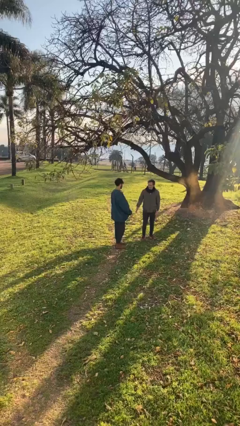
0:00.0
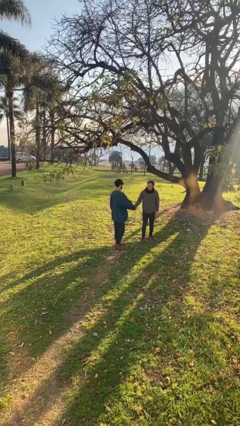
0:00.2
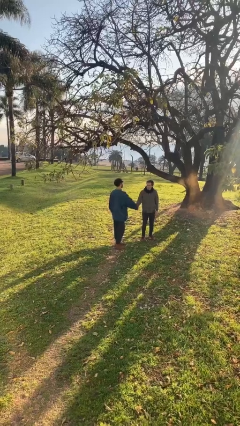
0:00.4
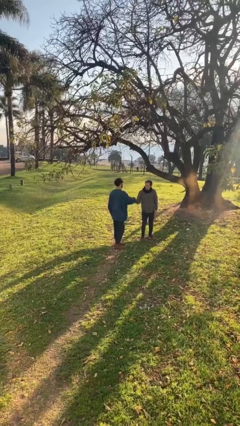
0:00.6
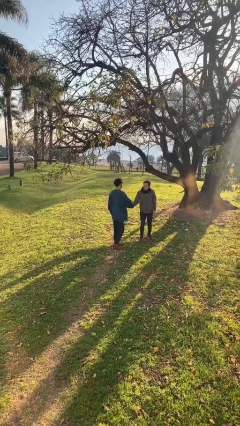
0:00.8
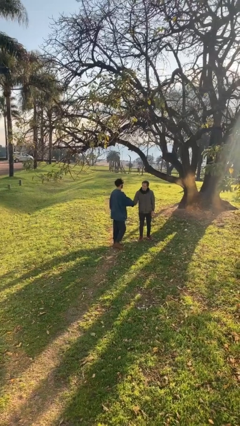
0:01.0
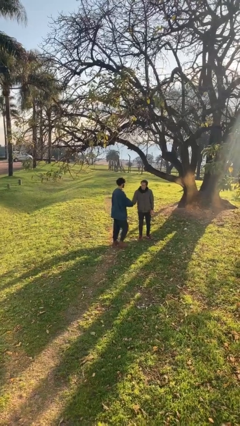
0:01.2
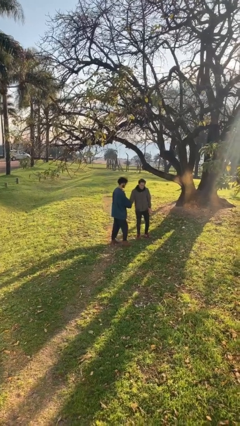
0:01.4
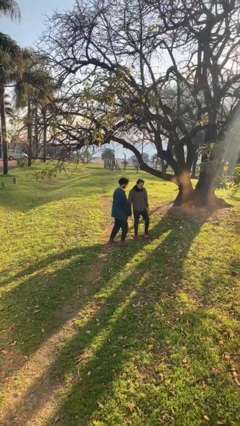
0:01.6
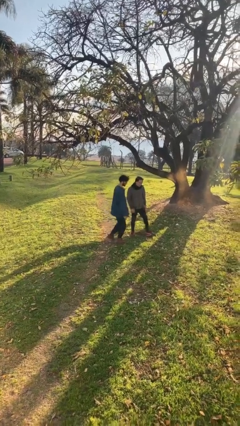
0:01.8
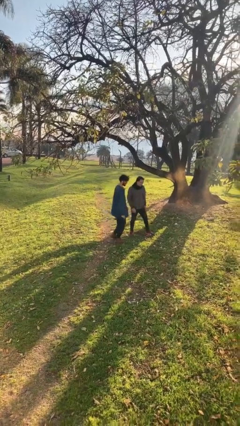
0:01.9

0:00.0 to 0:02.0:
person shakes hand

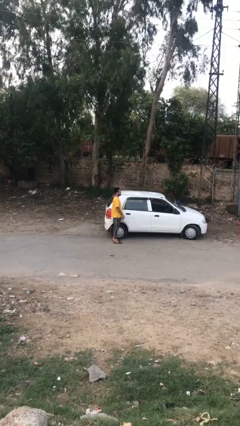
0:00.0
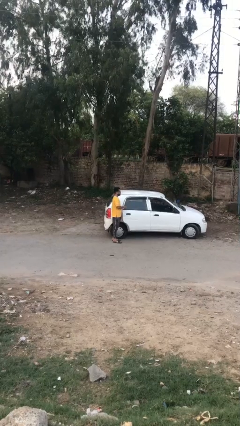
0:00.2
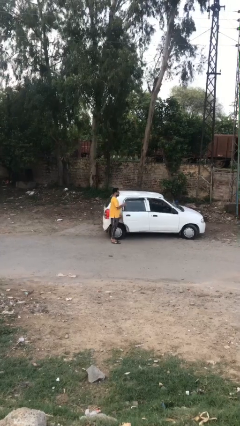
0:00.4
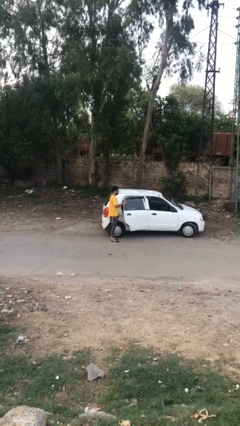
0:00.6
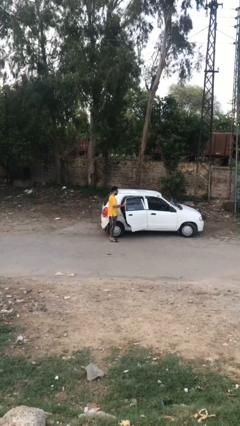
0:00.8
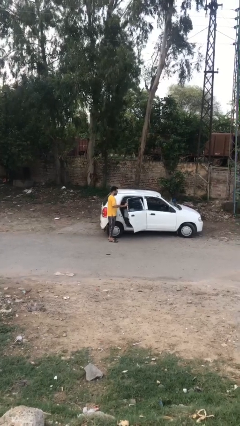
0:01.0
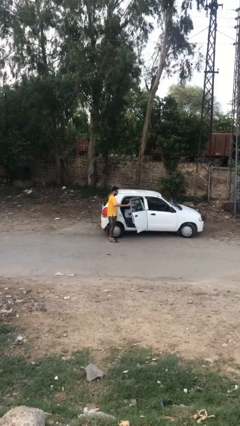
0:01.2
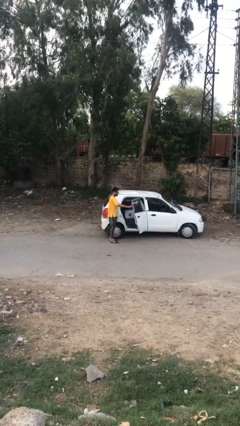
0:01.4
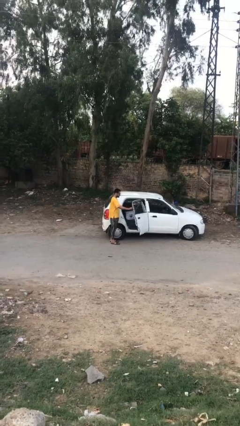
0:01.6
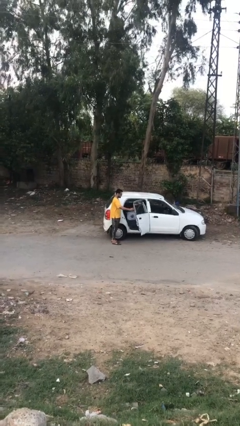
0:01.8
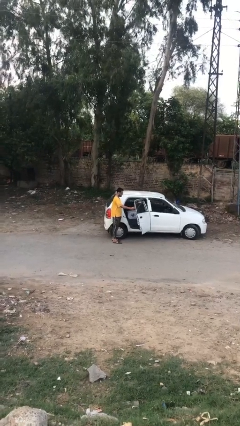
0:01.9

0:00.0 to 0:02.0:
person opens car door

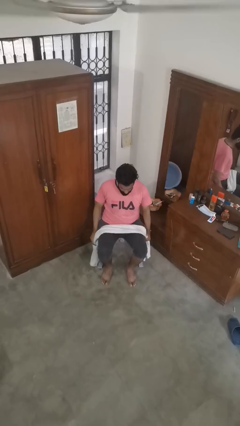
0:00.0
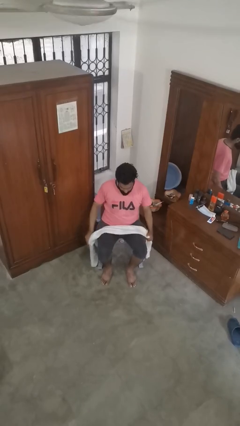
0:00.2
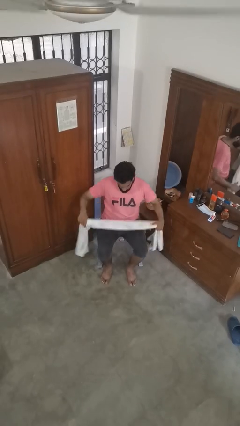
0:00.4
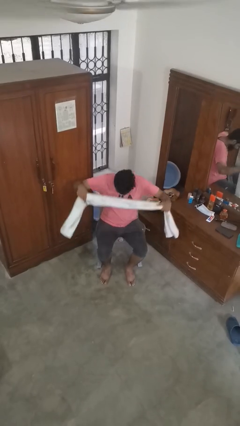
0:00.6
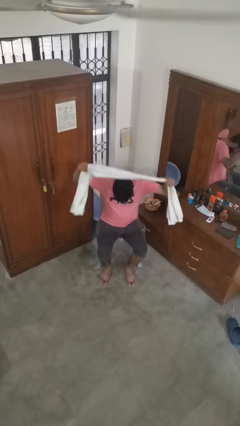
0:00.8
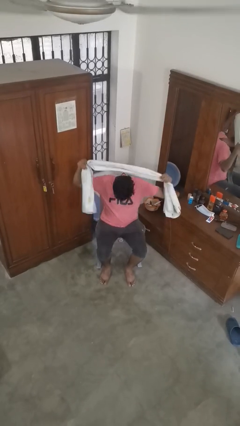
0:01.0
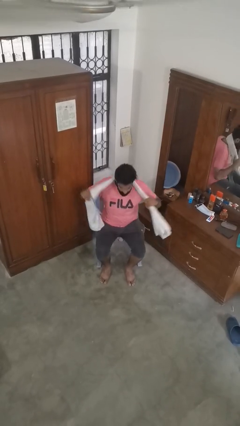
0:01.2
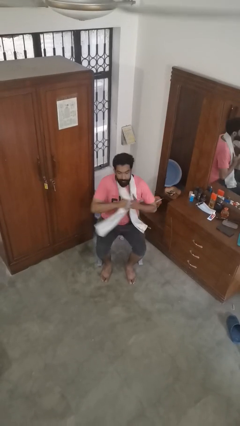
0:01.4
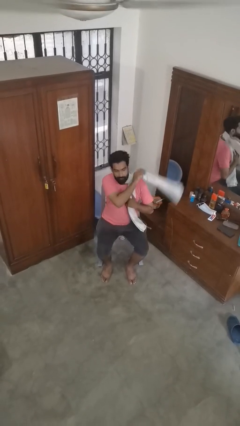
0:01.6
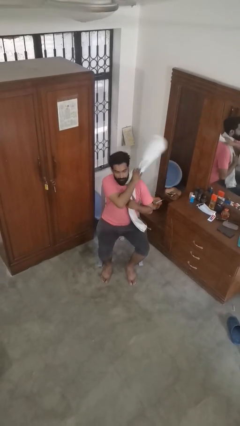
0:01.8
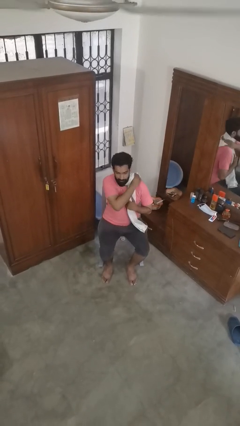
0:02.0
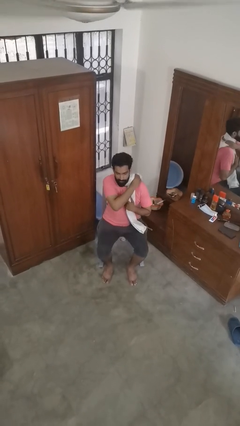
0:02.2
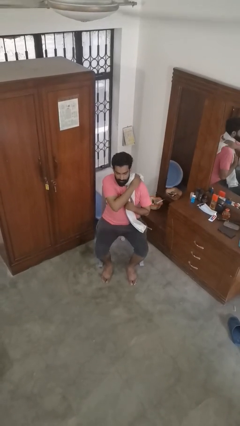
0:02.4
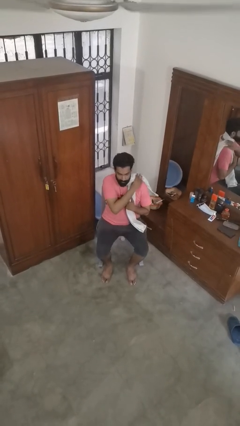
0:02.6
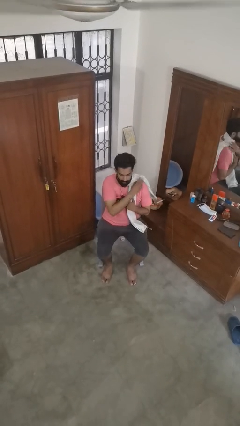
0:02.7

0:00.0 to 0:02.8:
person puts on scarf

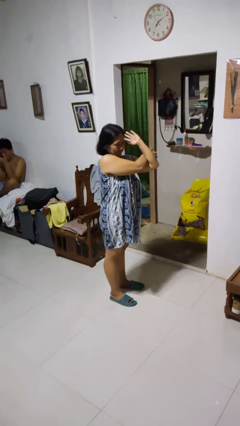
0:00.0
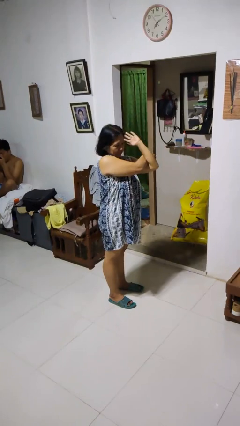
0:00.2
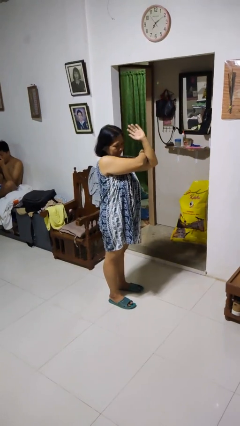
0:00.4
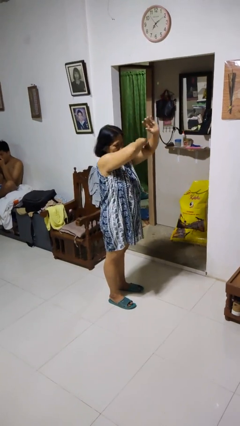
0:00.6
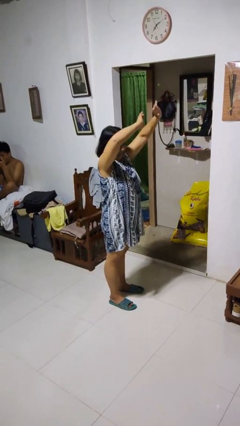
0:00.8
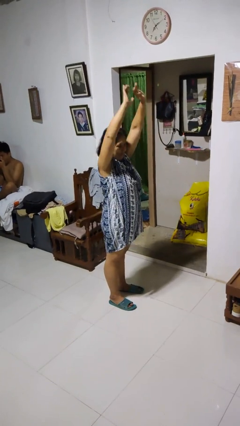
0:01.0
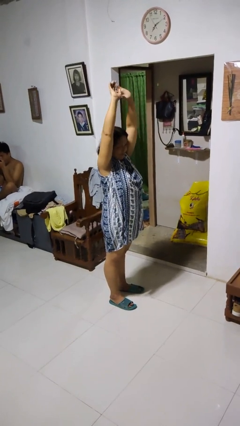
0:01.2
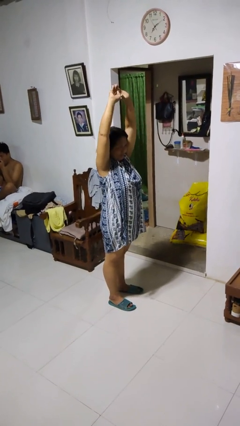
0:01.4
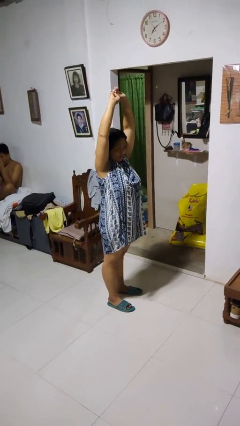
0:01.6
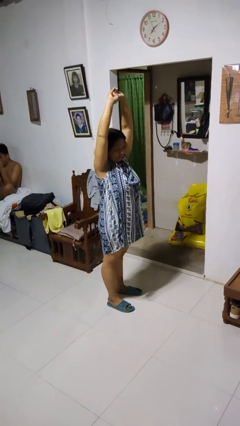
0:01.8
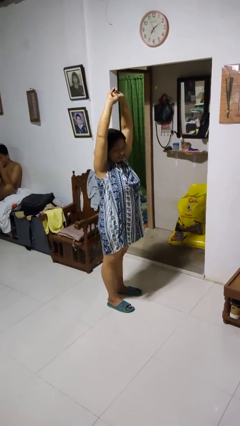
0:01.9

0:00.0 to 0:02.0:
person stretches arms over head

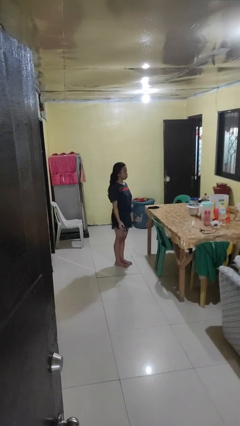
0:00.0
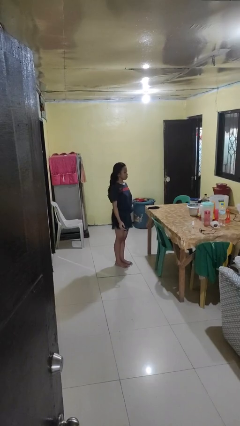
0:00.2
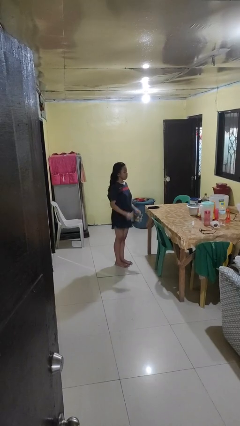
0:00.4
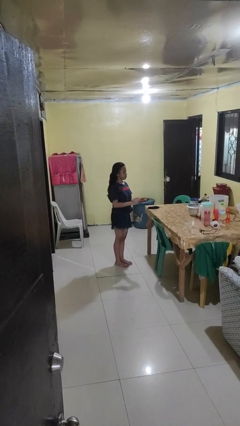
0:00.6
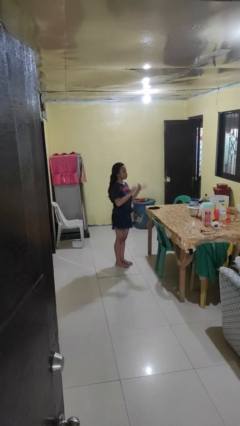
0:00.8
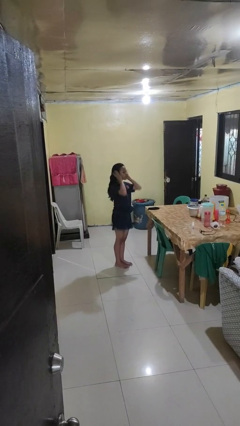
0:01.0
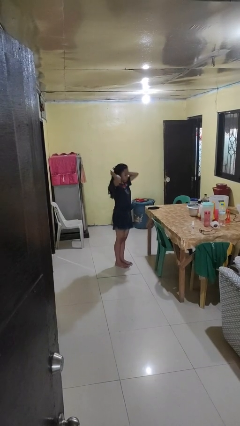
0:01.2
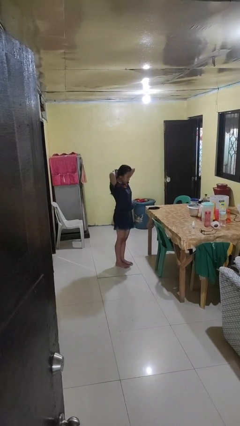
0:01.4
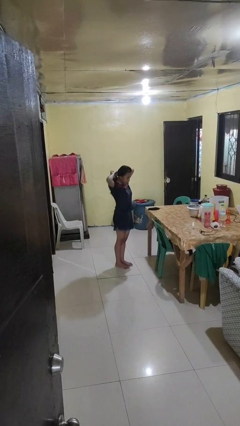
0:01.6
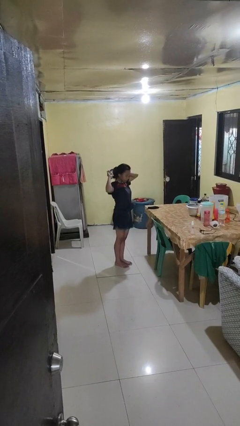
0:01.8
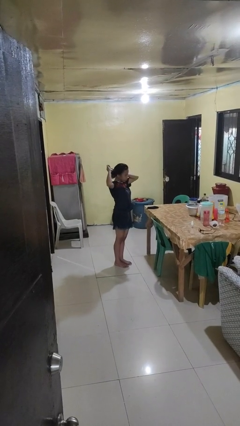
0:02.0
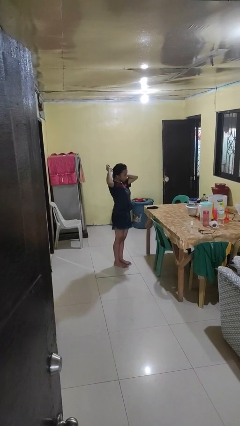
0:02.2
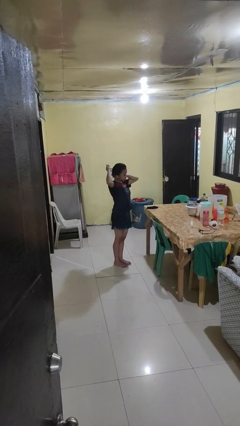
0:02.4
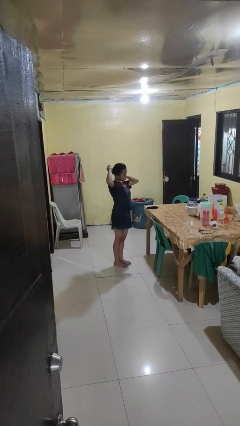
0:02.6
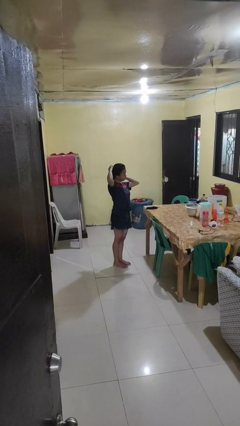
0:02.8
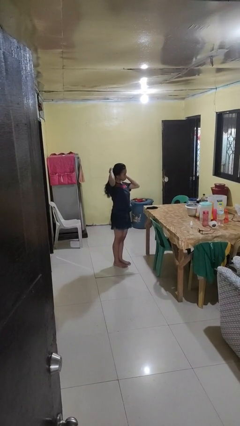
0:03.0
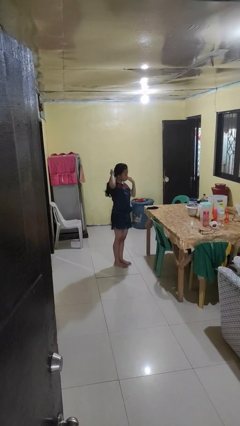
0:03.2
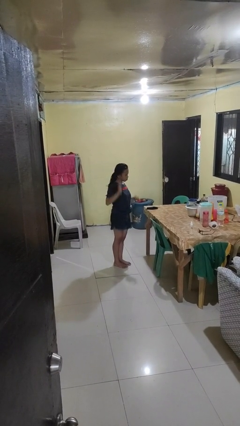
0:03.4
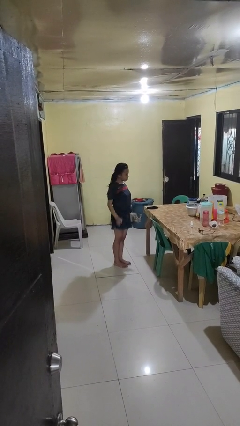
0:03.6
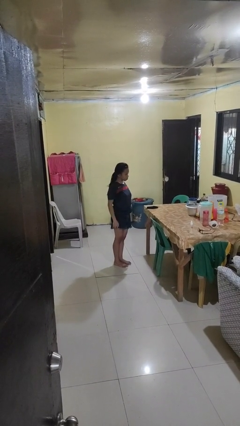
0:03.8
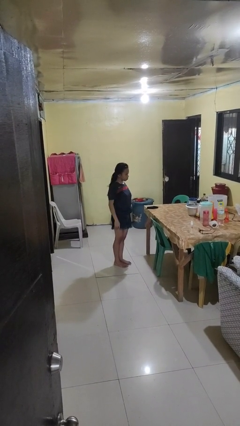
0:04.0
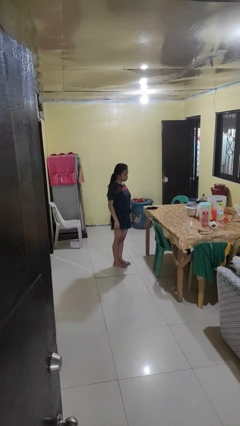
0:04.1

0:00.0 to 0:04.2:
person puts hair in ponytail

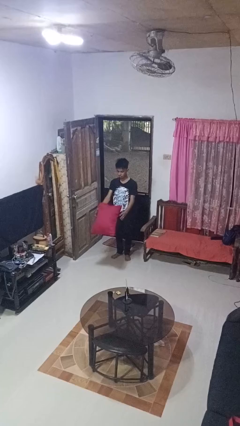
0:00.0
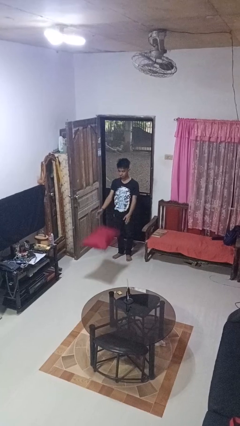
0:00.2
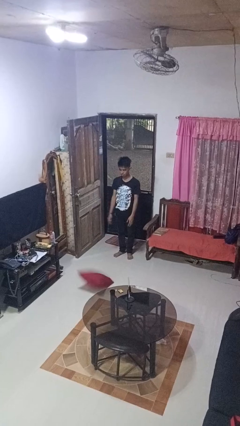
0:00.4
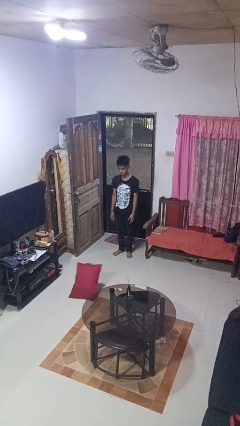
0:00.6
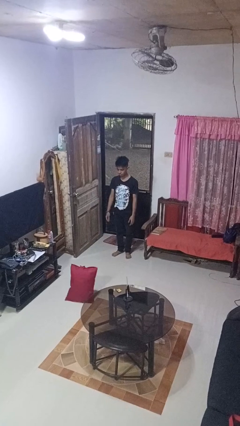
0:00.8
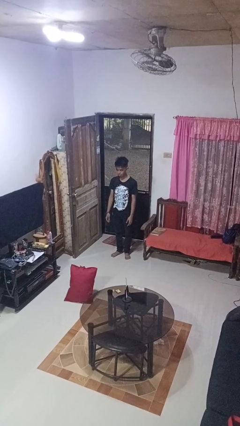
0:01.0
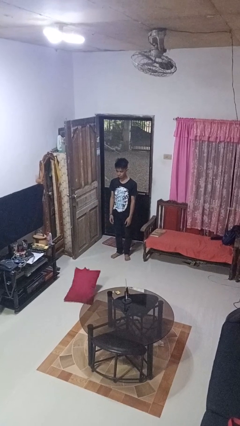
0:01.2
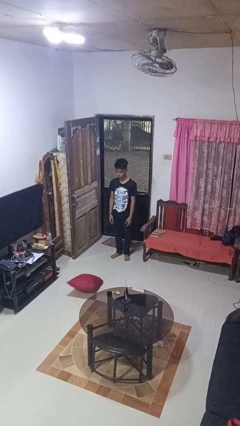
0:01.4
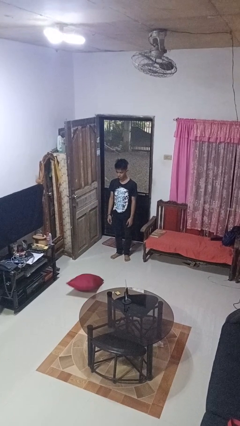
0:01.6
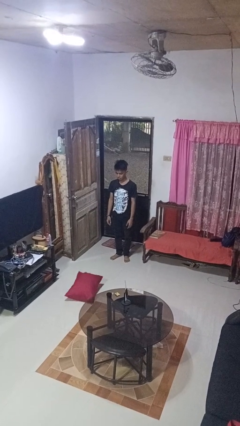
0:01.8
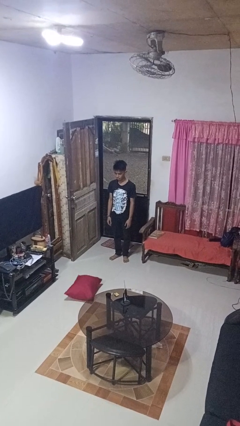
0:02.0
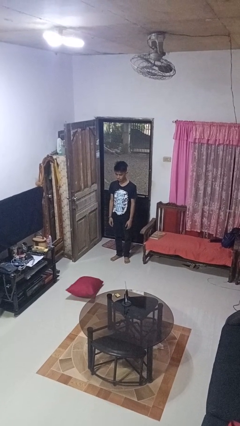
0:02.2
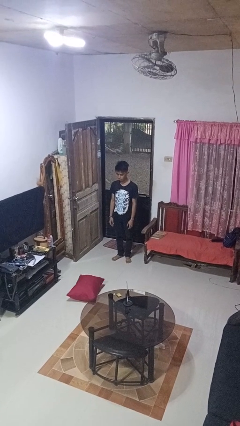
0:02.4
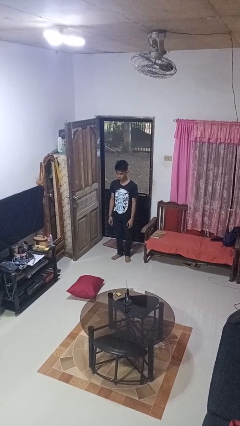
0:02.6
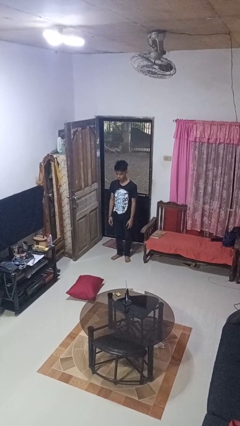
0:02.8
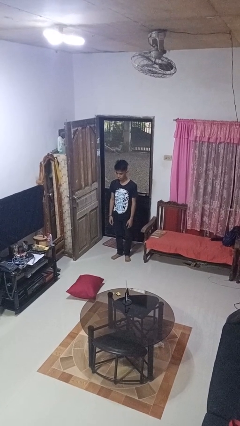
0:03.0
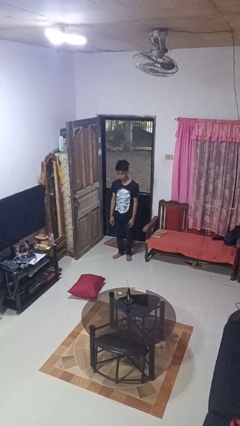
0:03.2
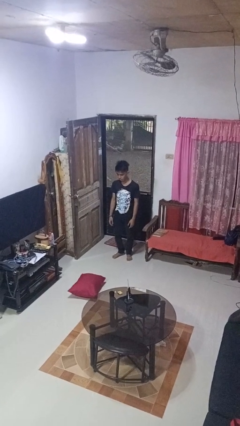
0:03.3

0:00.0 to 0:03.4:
person throws object to ground

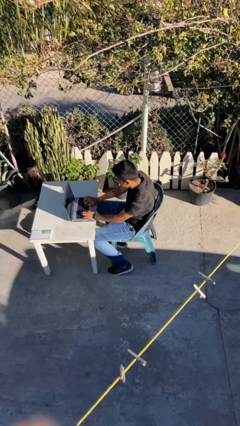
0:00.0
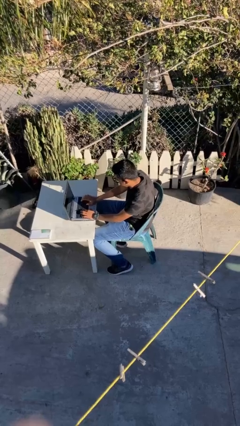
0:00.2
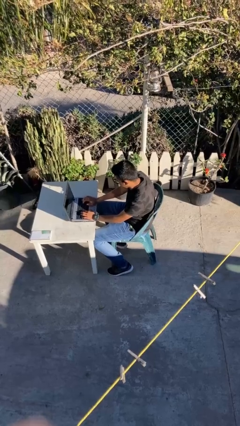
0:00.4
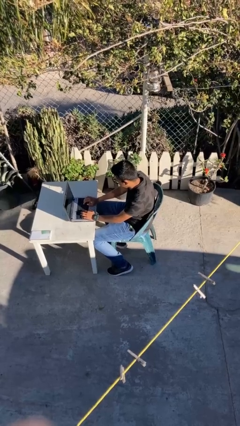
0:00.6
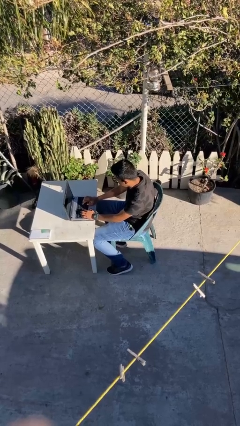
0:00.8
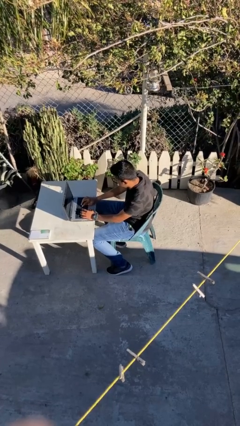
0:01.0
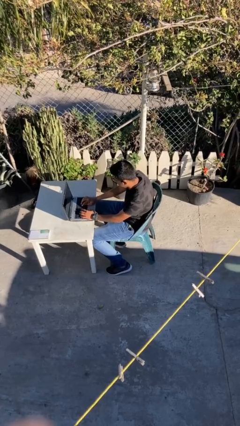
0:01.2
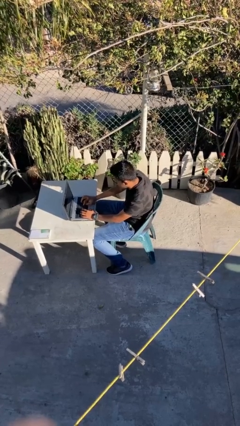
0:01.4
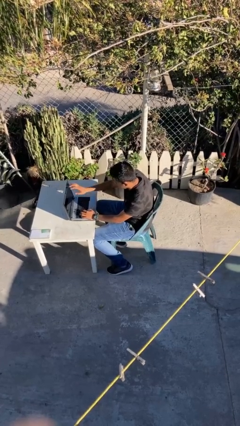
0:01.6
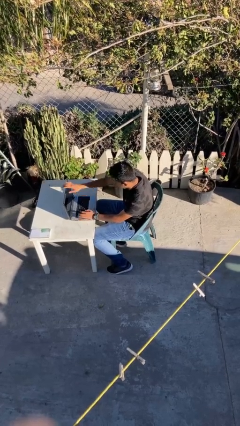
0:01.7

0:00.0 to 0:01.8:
person interacts with laptop
